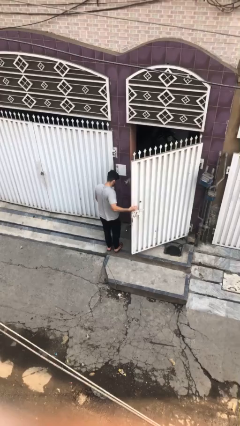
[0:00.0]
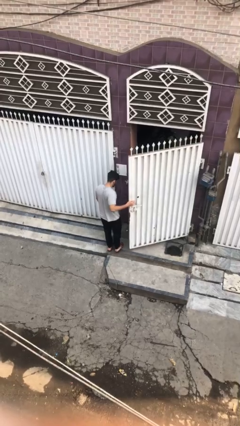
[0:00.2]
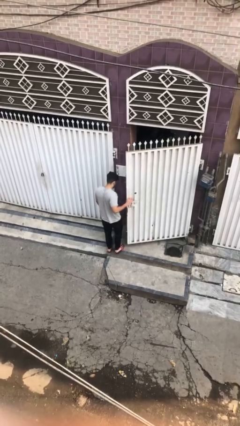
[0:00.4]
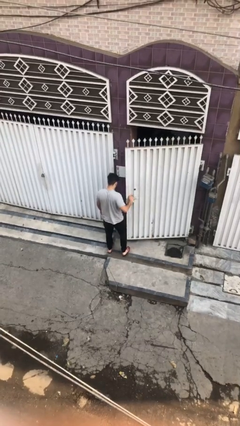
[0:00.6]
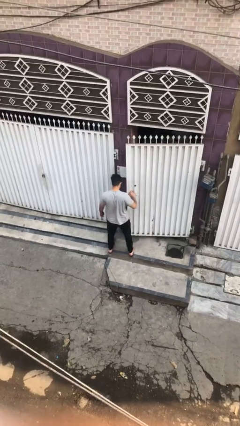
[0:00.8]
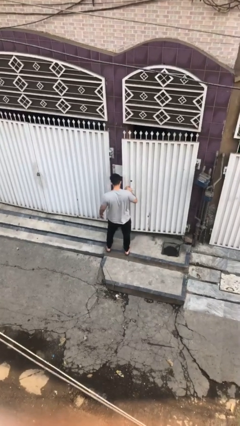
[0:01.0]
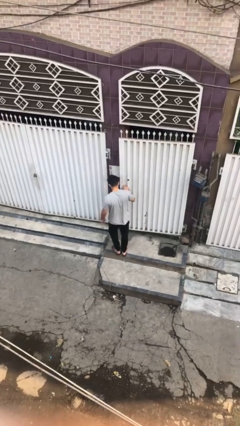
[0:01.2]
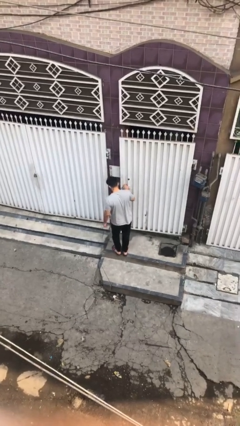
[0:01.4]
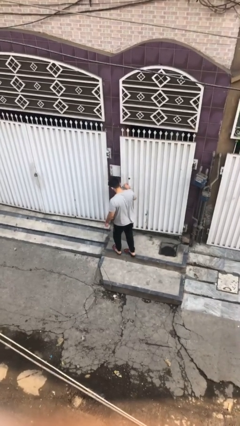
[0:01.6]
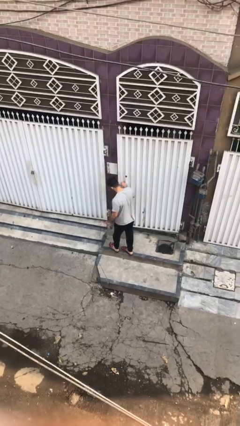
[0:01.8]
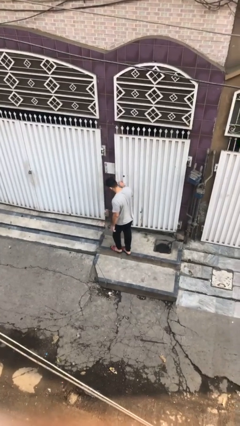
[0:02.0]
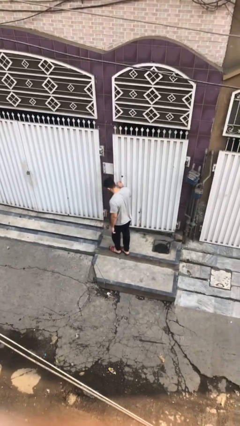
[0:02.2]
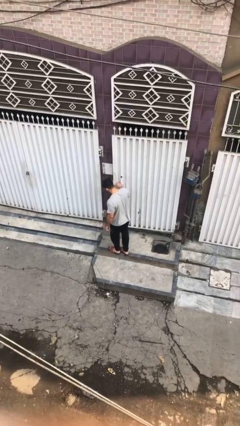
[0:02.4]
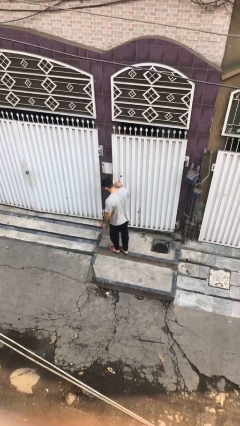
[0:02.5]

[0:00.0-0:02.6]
person closes facility door

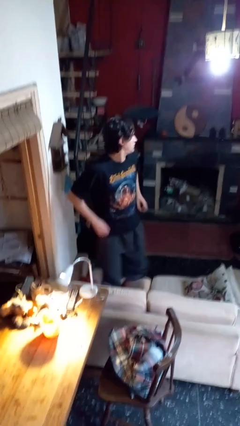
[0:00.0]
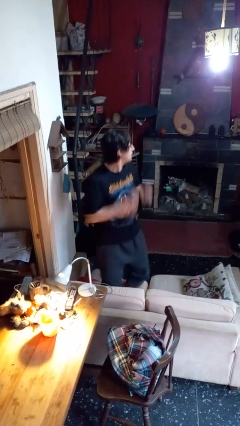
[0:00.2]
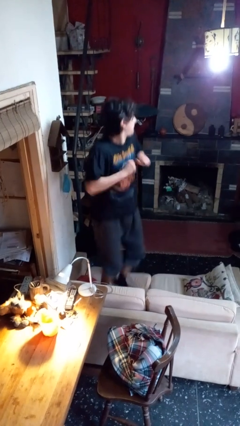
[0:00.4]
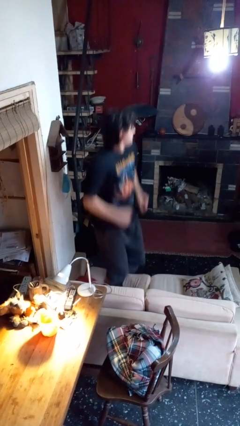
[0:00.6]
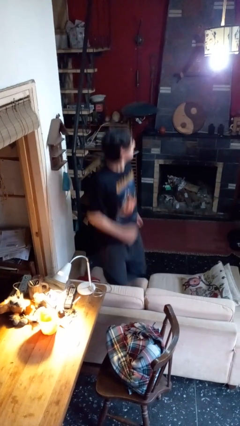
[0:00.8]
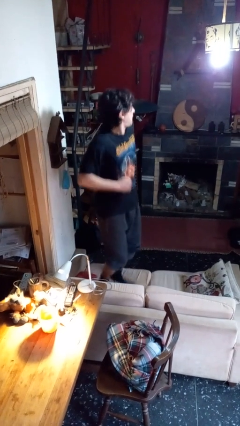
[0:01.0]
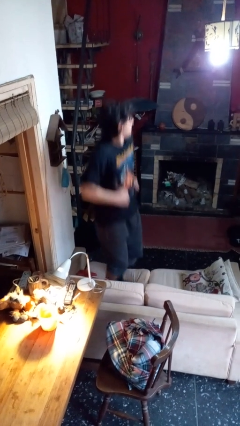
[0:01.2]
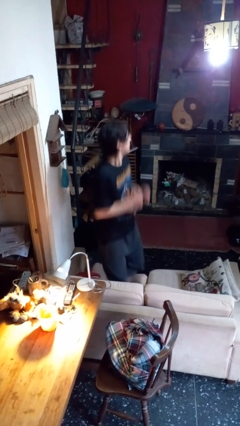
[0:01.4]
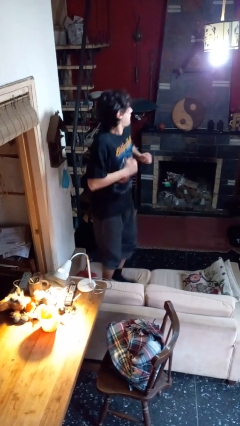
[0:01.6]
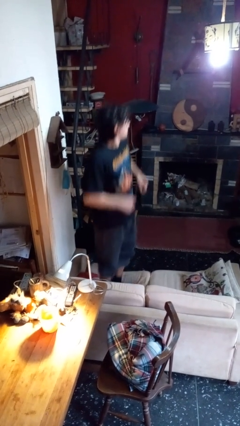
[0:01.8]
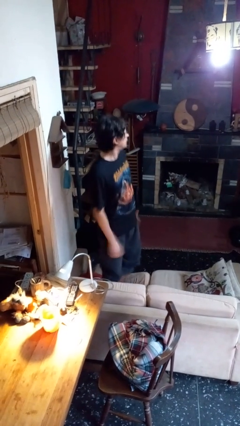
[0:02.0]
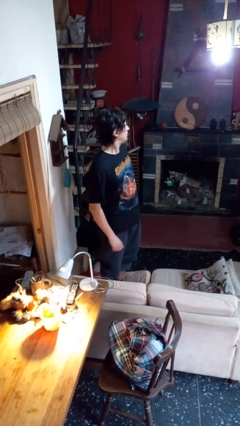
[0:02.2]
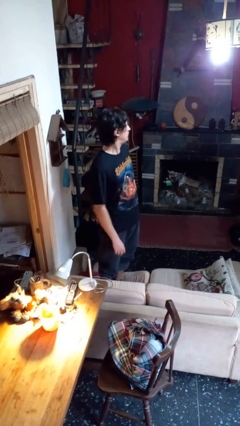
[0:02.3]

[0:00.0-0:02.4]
person jumps on couch

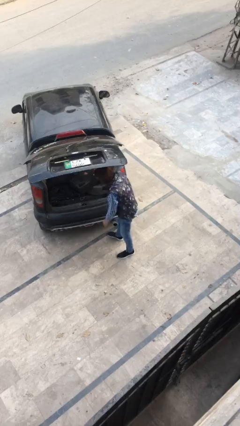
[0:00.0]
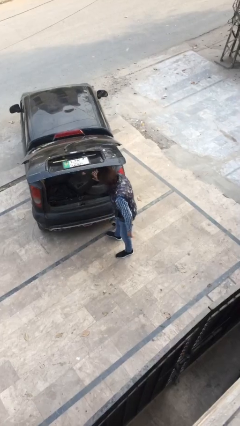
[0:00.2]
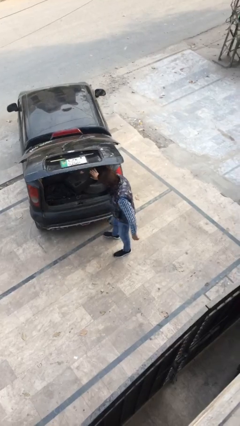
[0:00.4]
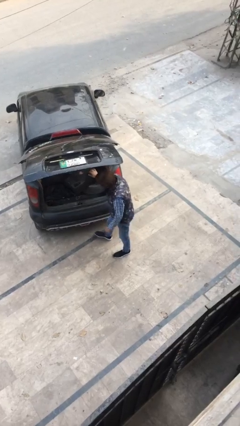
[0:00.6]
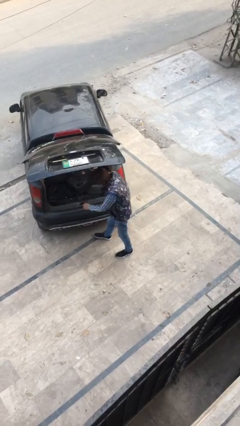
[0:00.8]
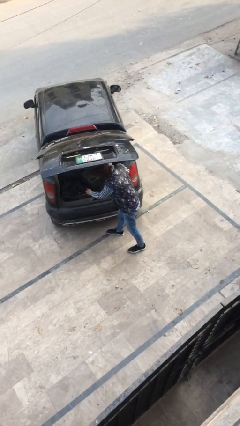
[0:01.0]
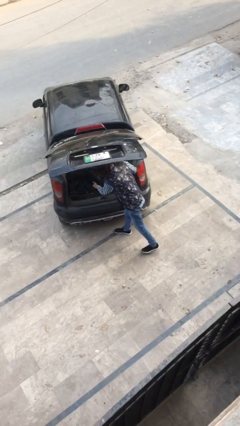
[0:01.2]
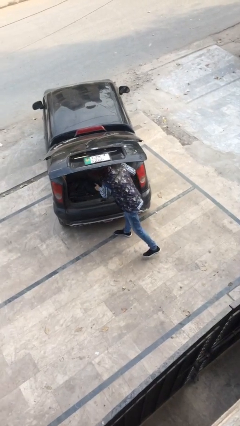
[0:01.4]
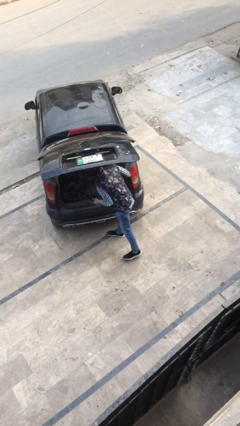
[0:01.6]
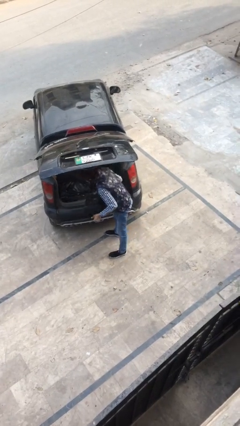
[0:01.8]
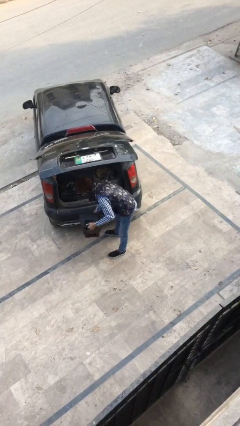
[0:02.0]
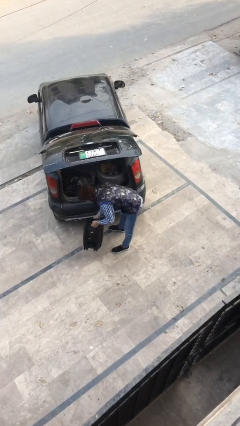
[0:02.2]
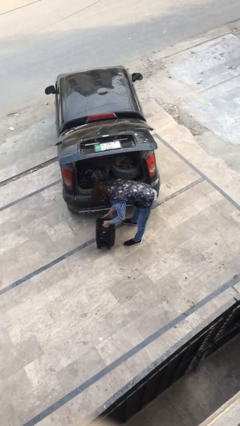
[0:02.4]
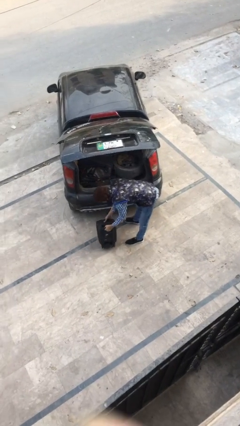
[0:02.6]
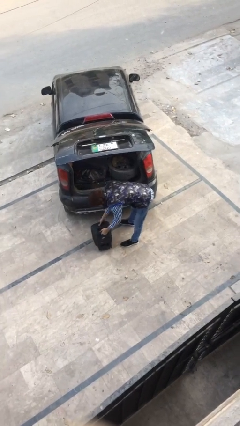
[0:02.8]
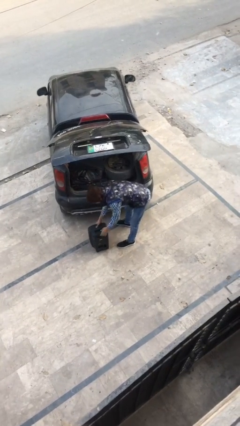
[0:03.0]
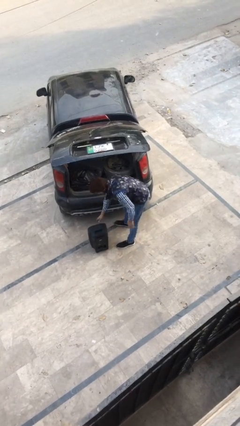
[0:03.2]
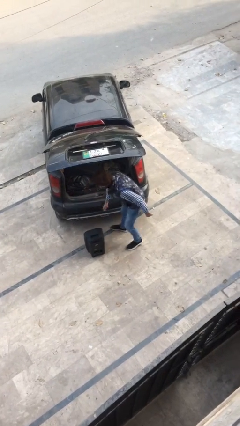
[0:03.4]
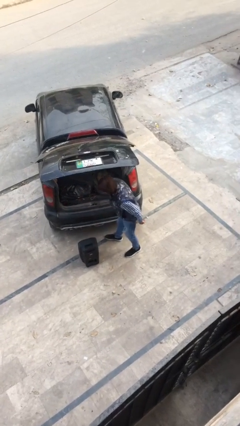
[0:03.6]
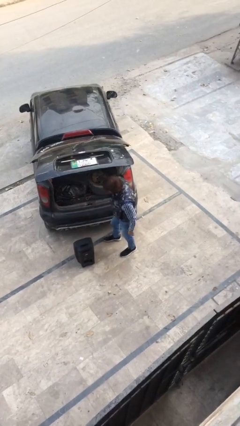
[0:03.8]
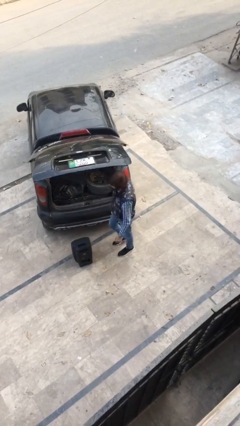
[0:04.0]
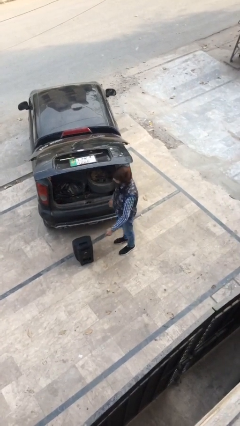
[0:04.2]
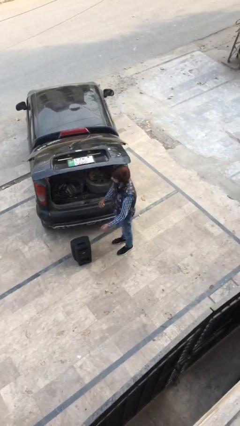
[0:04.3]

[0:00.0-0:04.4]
person unloads car

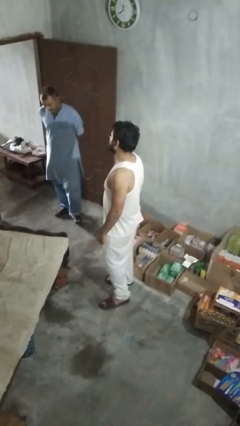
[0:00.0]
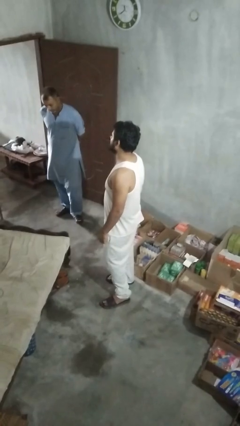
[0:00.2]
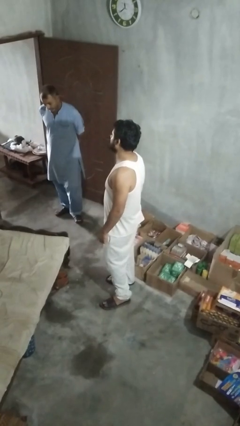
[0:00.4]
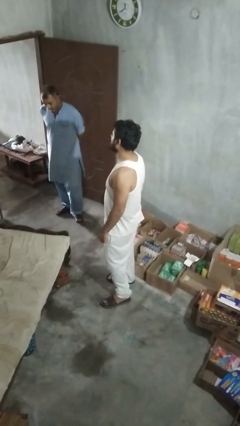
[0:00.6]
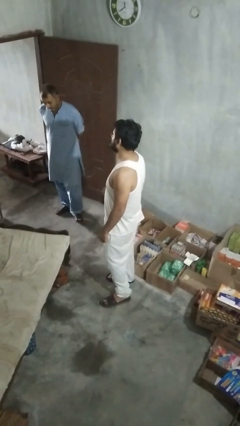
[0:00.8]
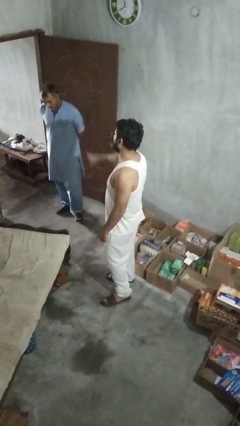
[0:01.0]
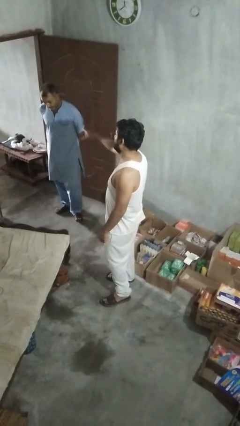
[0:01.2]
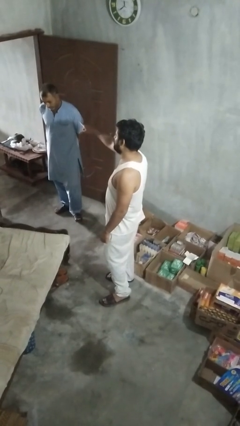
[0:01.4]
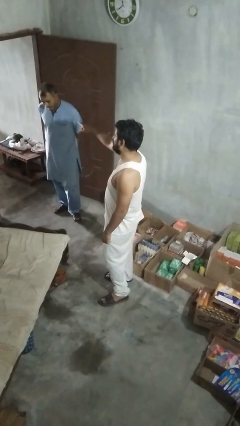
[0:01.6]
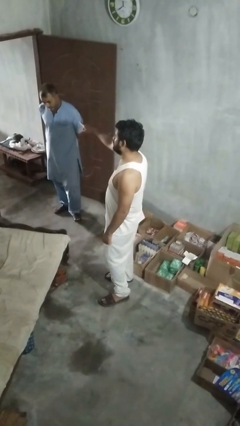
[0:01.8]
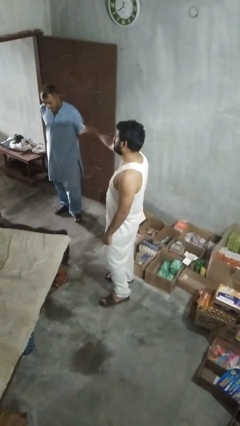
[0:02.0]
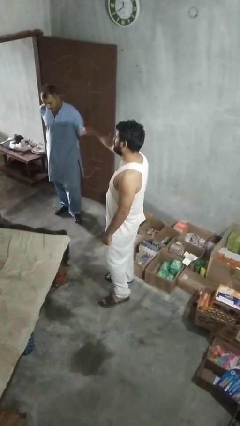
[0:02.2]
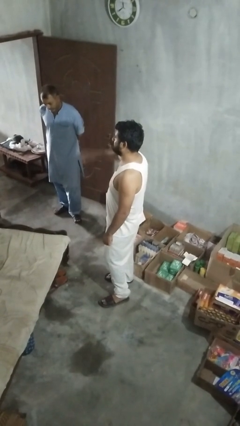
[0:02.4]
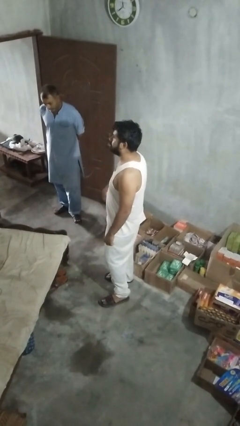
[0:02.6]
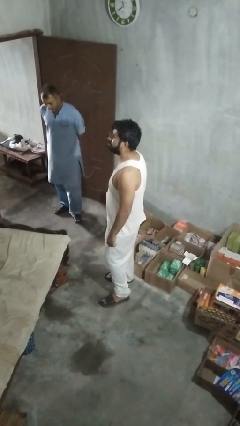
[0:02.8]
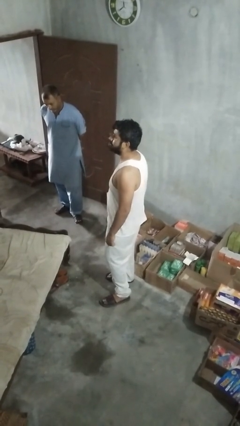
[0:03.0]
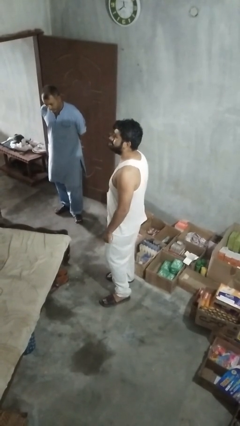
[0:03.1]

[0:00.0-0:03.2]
person points at person

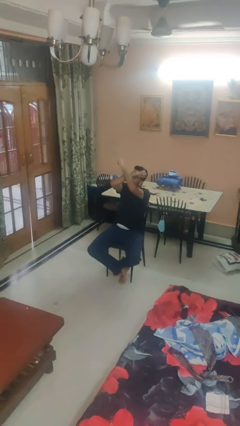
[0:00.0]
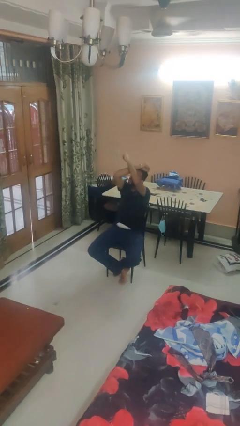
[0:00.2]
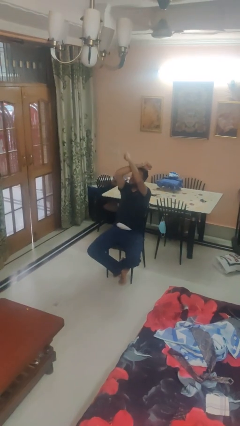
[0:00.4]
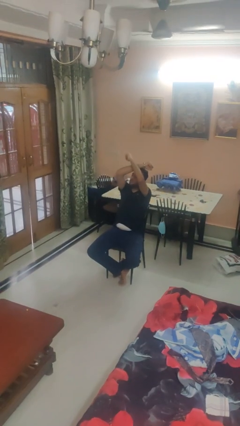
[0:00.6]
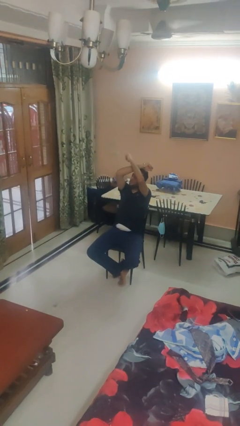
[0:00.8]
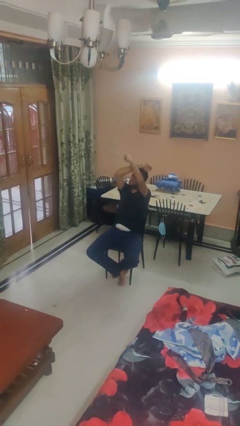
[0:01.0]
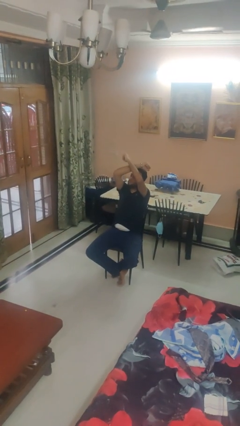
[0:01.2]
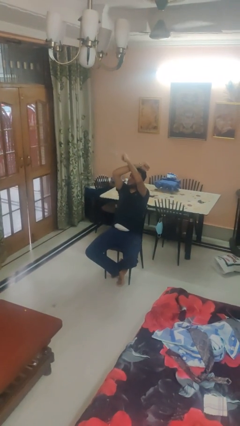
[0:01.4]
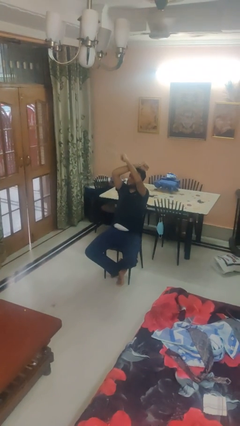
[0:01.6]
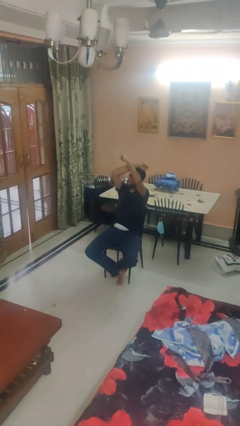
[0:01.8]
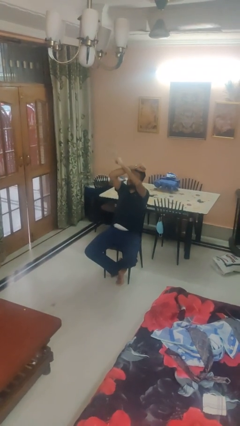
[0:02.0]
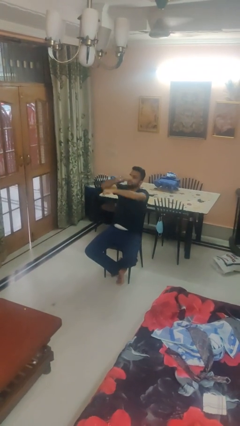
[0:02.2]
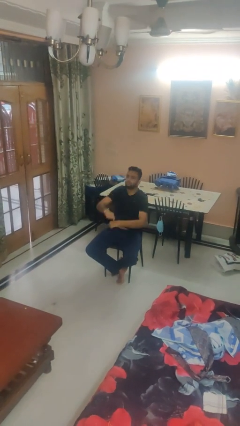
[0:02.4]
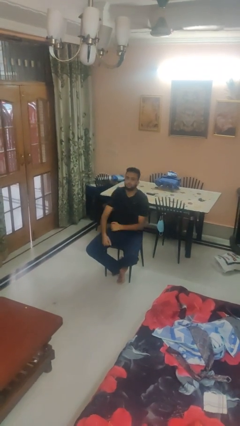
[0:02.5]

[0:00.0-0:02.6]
person gestures arms x

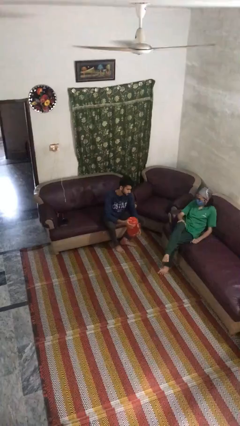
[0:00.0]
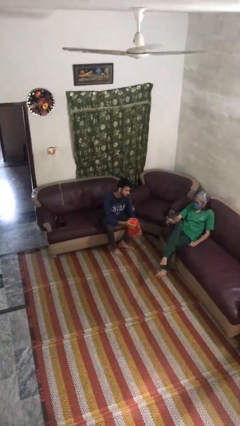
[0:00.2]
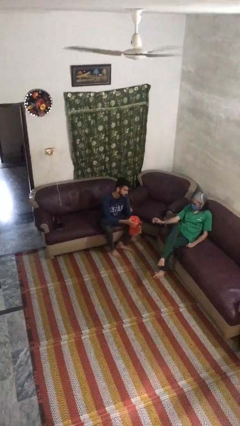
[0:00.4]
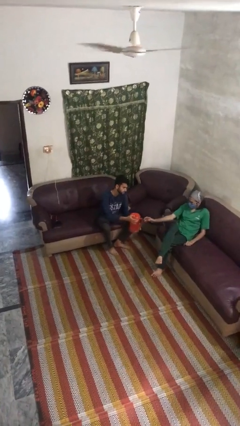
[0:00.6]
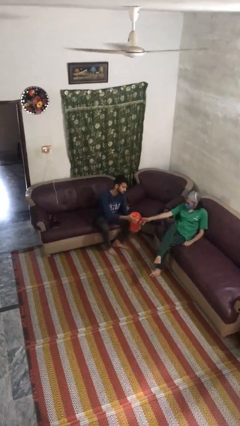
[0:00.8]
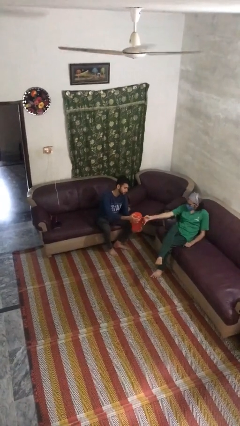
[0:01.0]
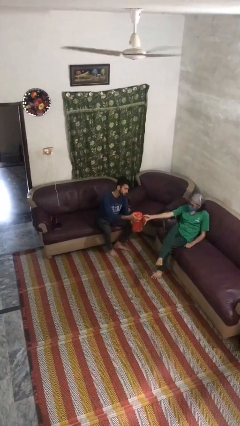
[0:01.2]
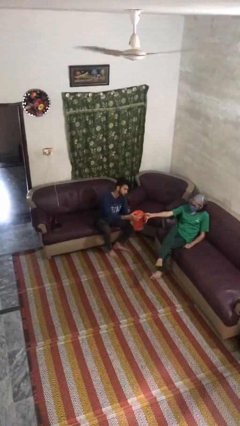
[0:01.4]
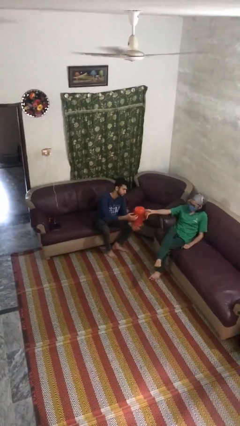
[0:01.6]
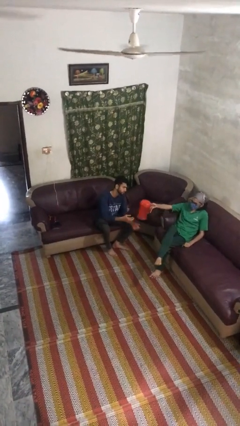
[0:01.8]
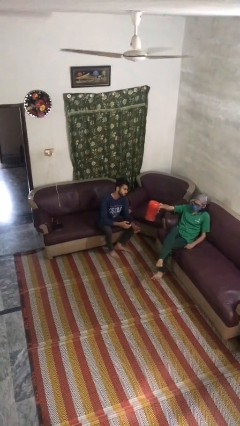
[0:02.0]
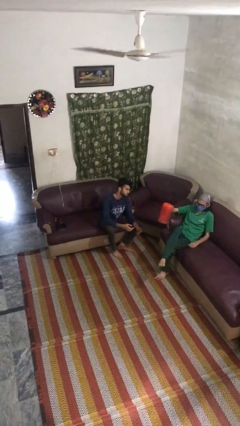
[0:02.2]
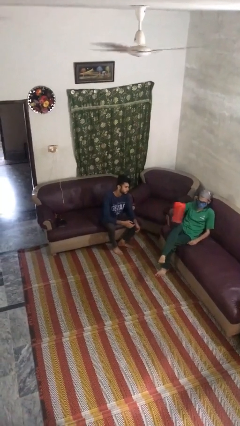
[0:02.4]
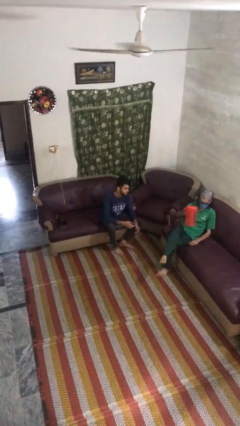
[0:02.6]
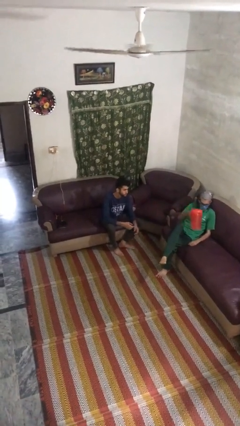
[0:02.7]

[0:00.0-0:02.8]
person transfers object to person
